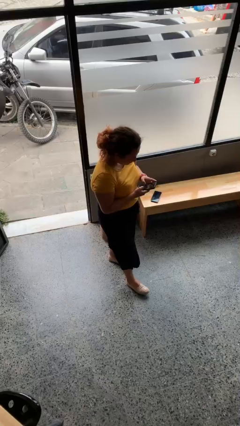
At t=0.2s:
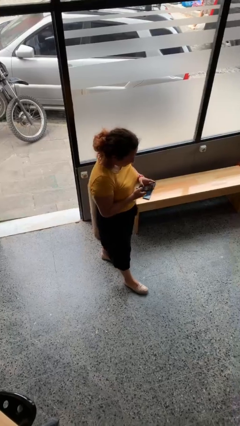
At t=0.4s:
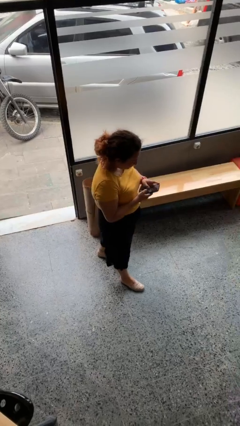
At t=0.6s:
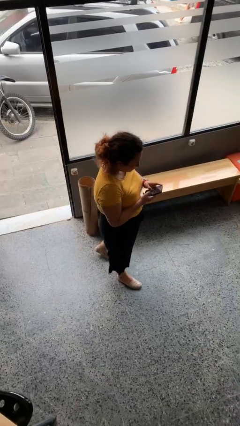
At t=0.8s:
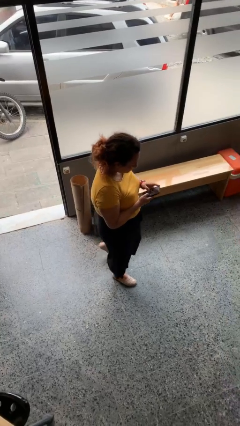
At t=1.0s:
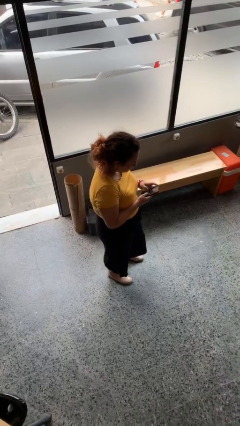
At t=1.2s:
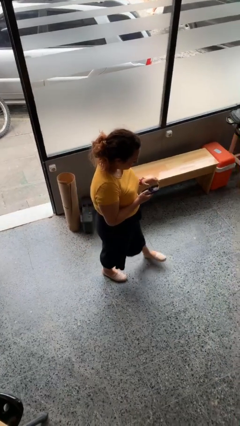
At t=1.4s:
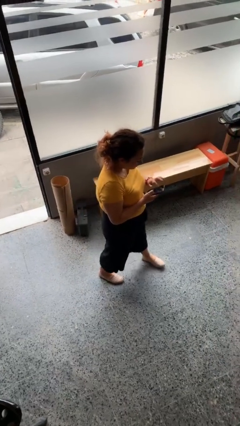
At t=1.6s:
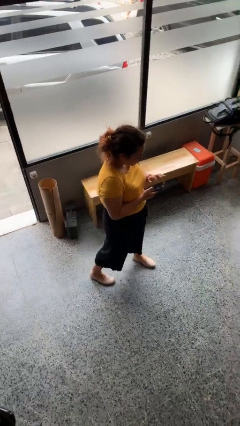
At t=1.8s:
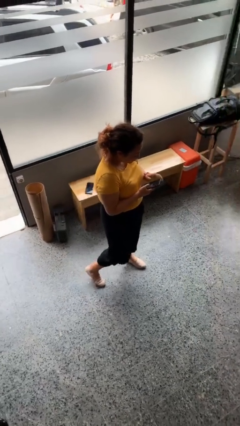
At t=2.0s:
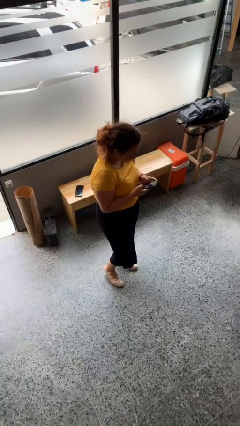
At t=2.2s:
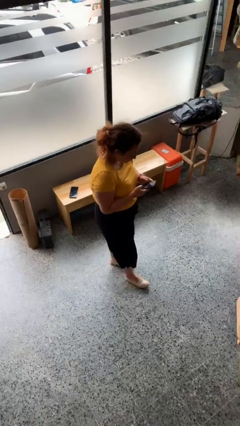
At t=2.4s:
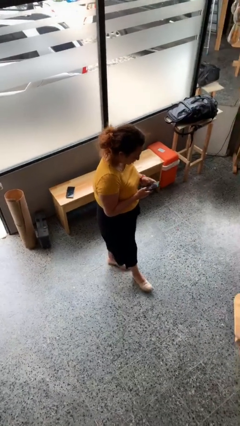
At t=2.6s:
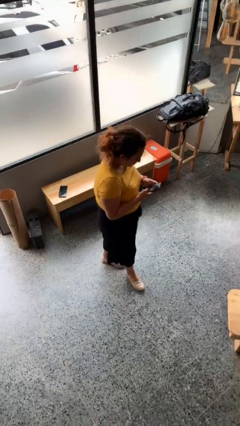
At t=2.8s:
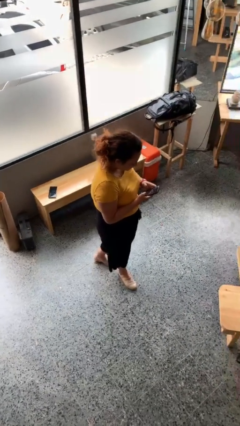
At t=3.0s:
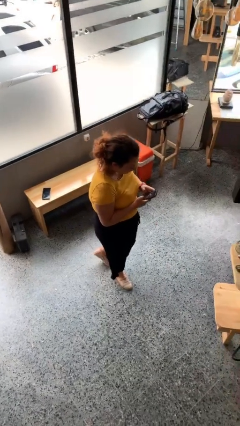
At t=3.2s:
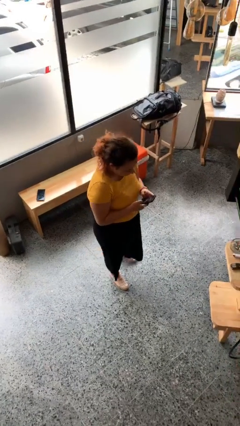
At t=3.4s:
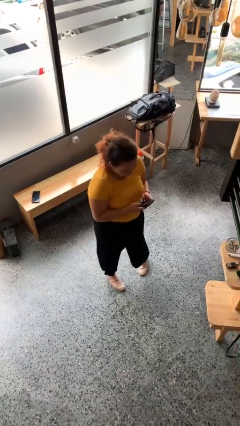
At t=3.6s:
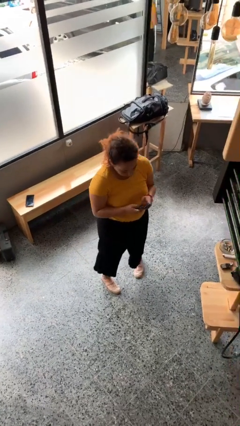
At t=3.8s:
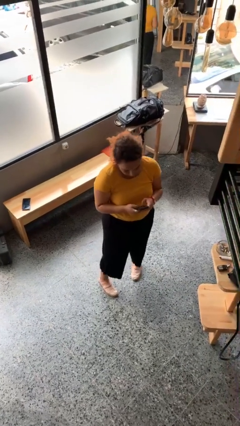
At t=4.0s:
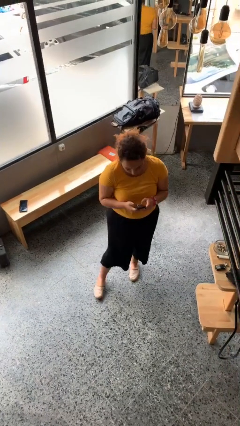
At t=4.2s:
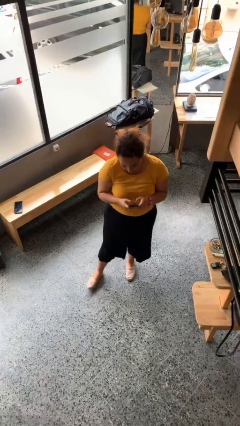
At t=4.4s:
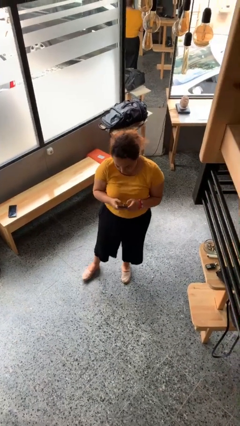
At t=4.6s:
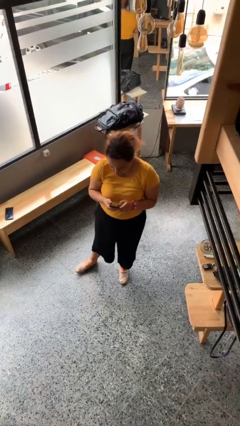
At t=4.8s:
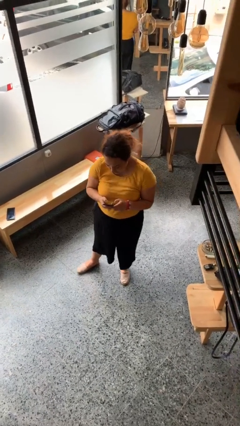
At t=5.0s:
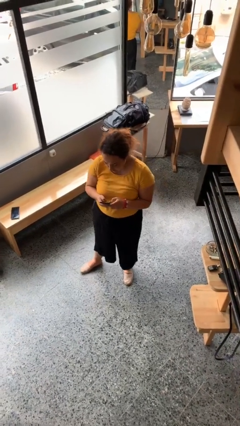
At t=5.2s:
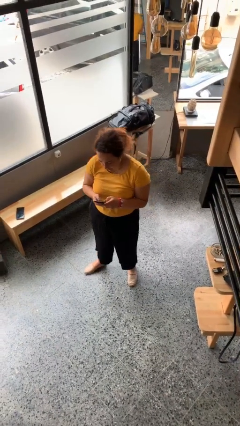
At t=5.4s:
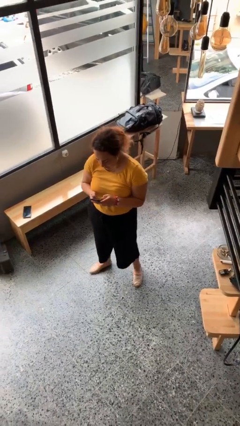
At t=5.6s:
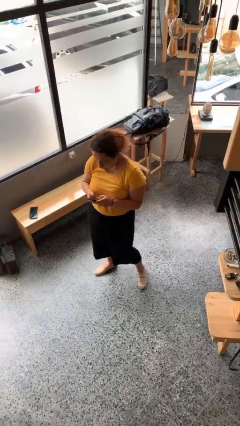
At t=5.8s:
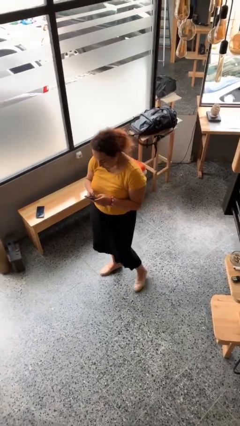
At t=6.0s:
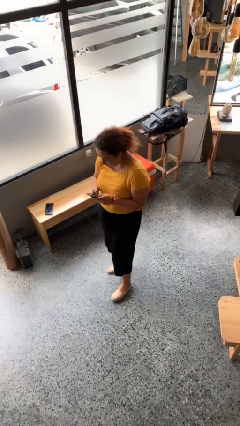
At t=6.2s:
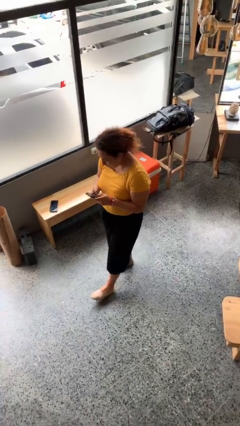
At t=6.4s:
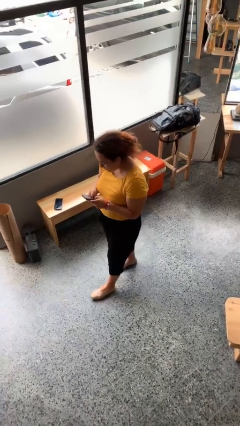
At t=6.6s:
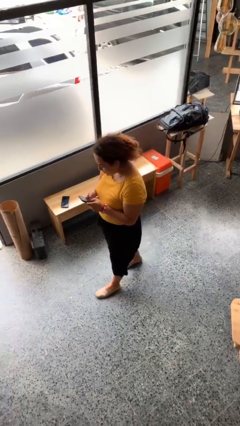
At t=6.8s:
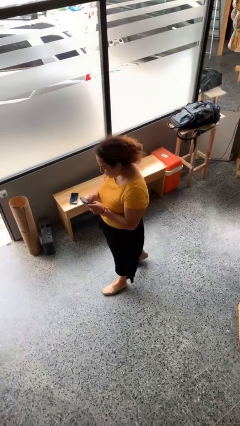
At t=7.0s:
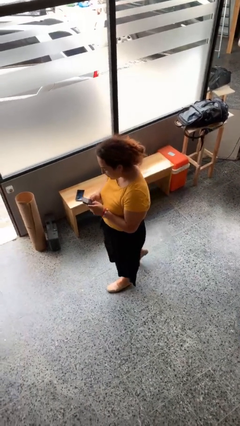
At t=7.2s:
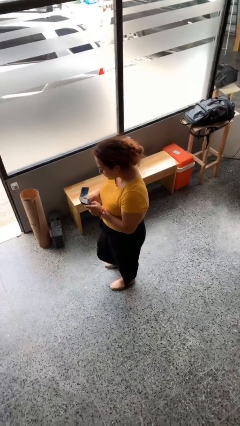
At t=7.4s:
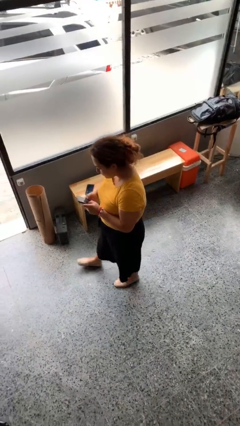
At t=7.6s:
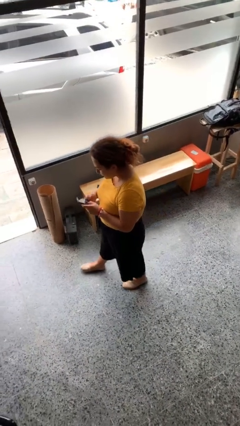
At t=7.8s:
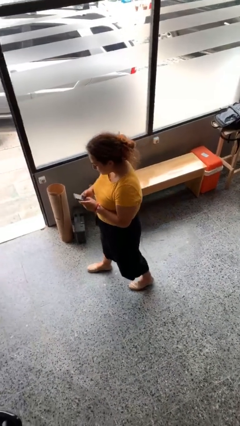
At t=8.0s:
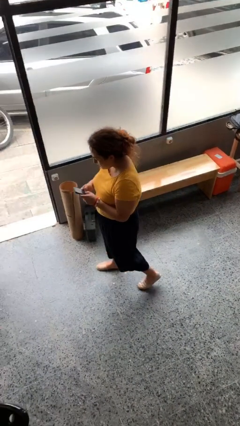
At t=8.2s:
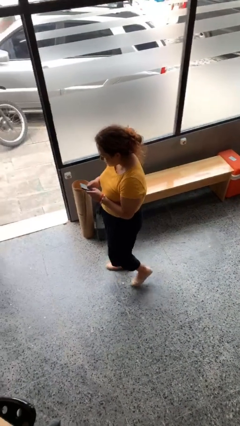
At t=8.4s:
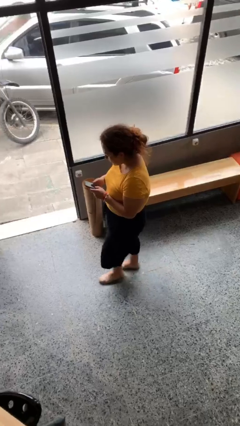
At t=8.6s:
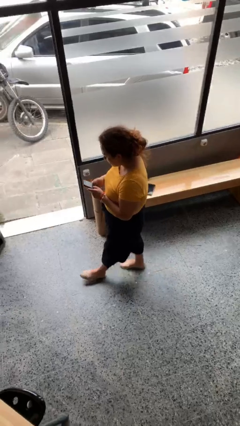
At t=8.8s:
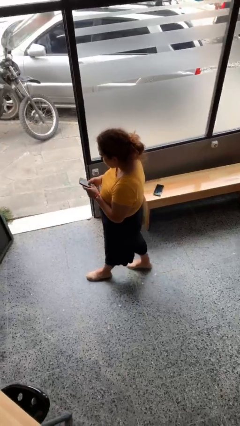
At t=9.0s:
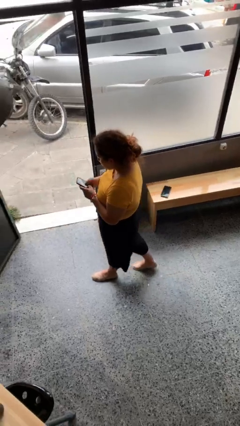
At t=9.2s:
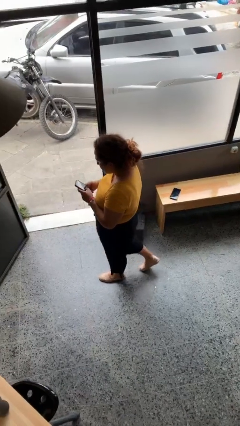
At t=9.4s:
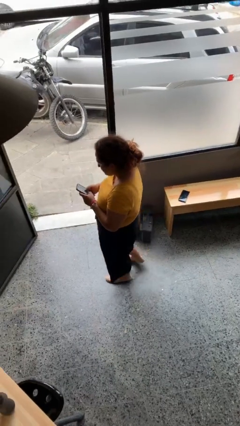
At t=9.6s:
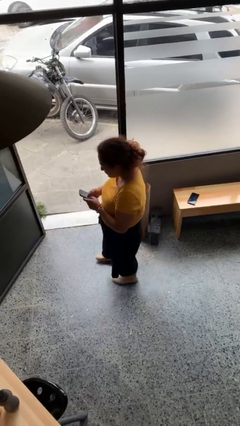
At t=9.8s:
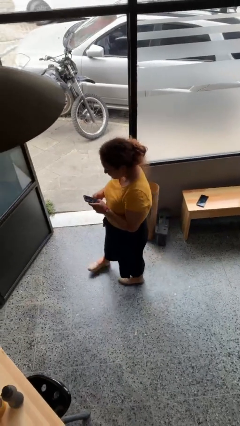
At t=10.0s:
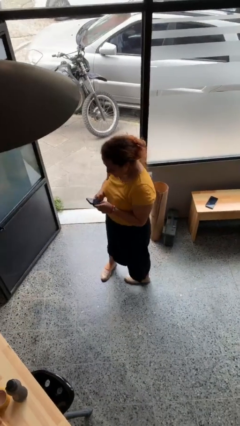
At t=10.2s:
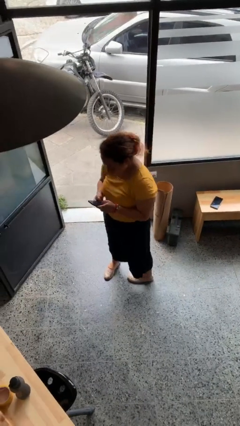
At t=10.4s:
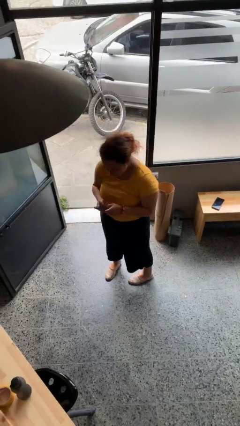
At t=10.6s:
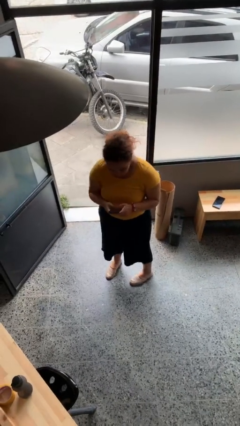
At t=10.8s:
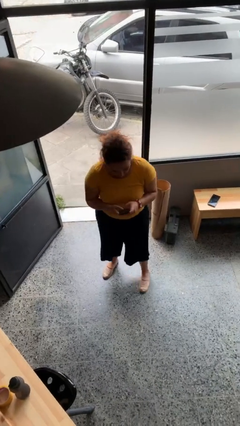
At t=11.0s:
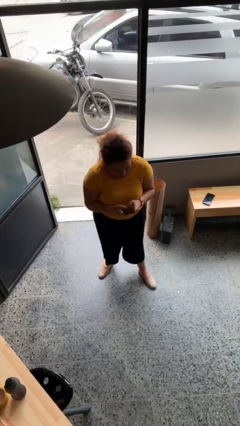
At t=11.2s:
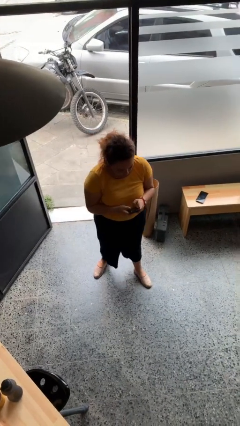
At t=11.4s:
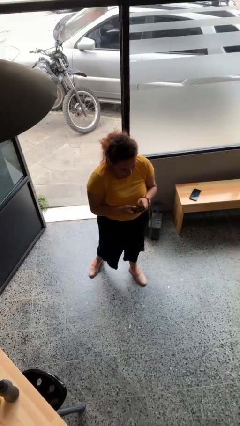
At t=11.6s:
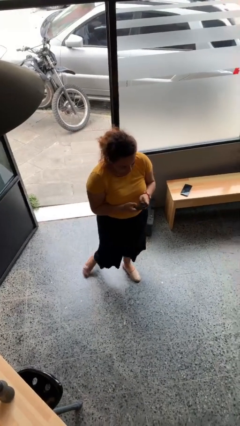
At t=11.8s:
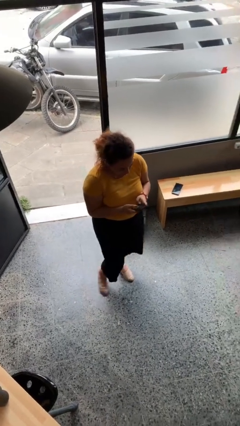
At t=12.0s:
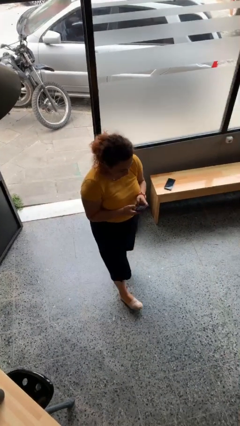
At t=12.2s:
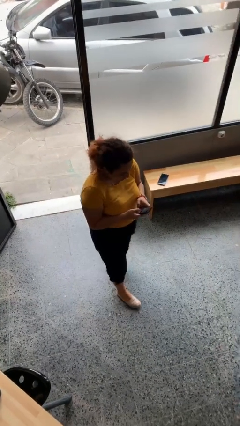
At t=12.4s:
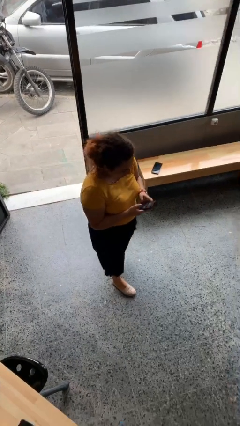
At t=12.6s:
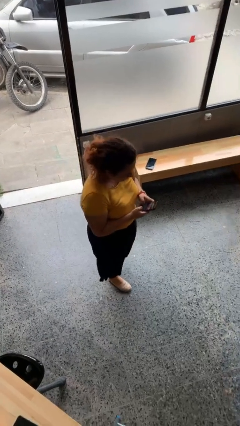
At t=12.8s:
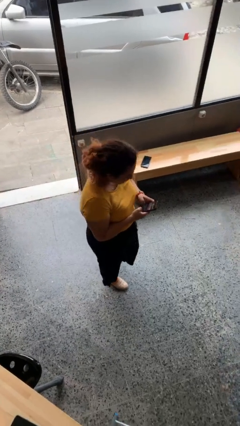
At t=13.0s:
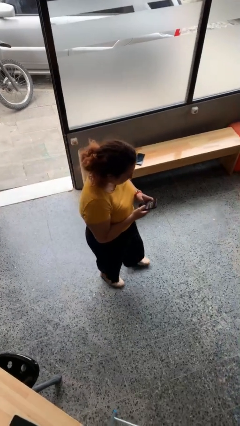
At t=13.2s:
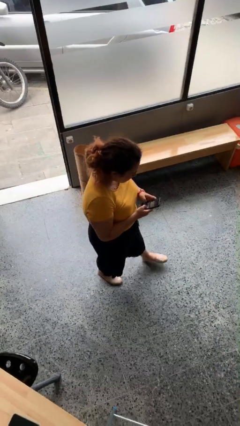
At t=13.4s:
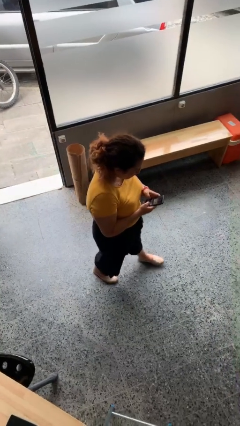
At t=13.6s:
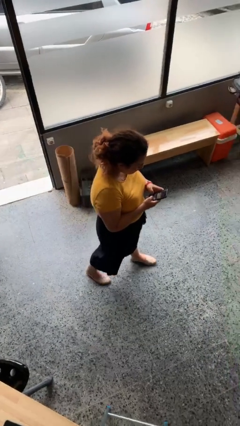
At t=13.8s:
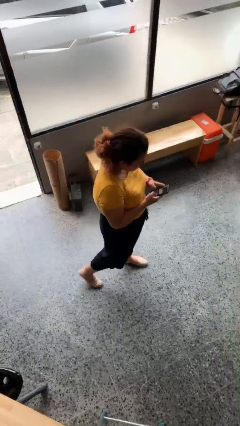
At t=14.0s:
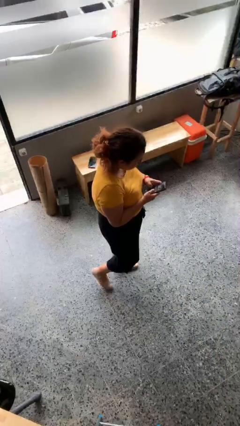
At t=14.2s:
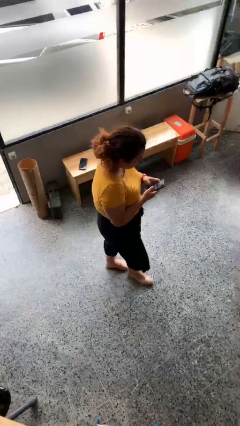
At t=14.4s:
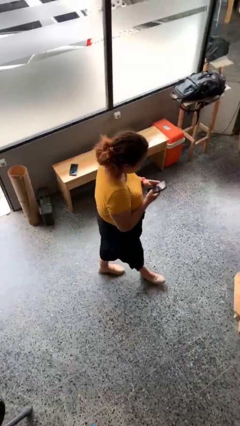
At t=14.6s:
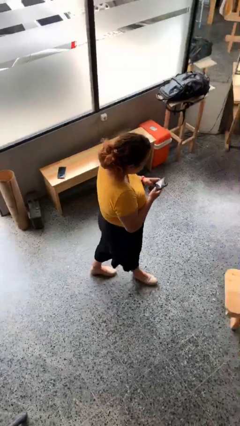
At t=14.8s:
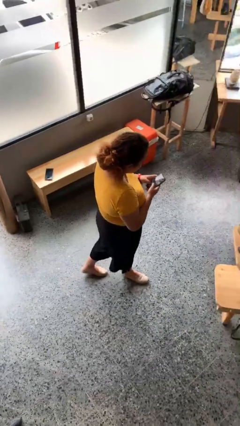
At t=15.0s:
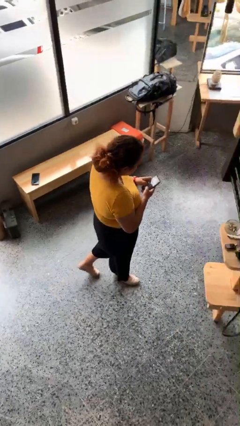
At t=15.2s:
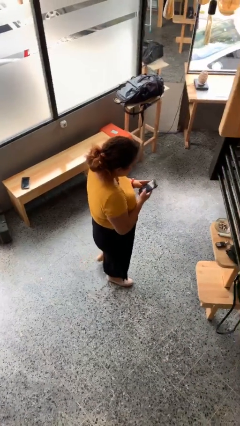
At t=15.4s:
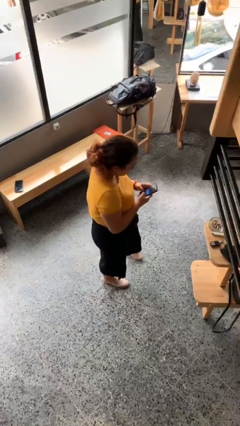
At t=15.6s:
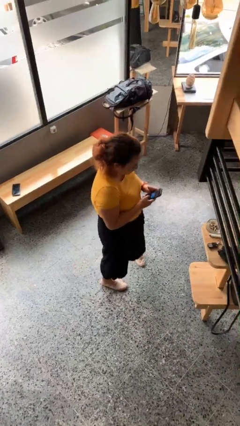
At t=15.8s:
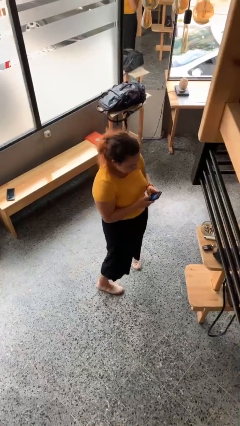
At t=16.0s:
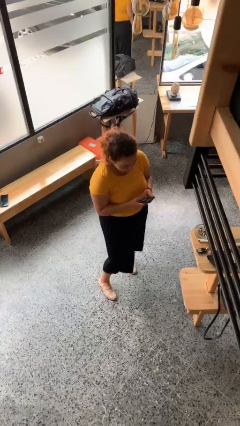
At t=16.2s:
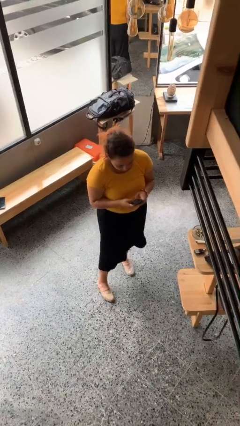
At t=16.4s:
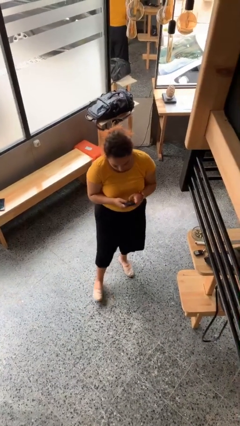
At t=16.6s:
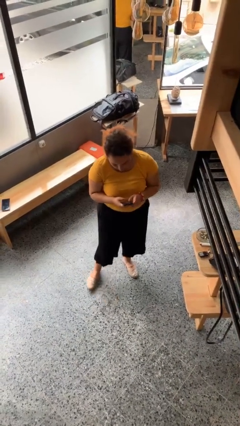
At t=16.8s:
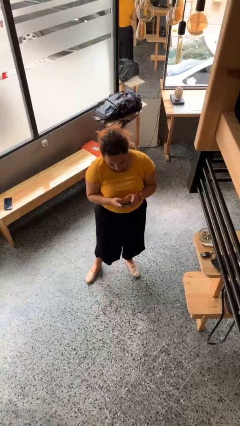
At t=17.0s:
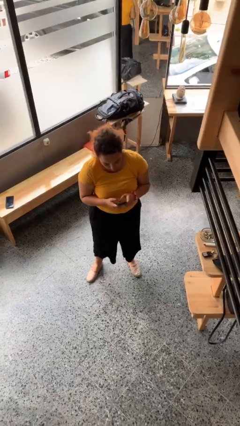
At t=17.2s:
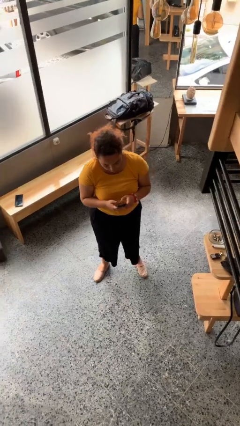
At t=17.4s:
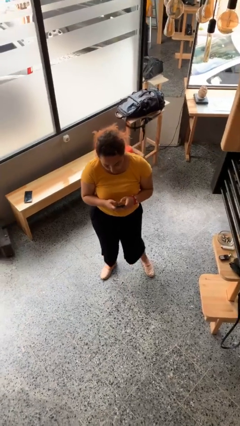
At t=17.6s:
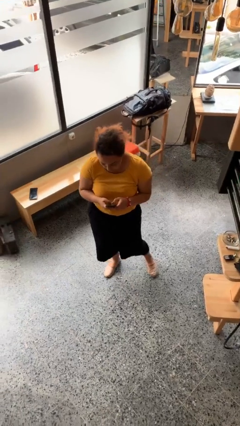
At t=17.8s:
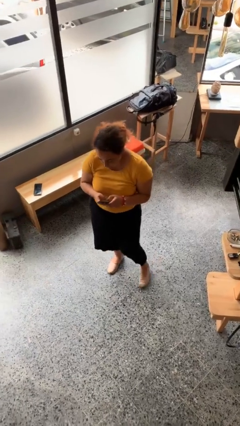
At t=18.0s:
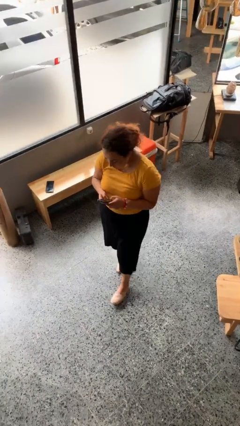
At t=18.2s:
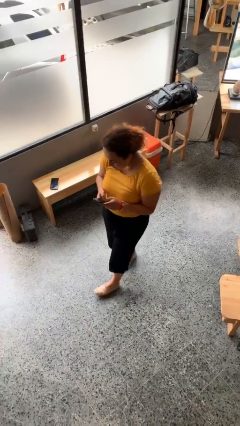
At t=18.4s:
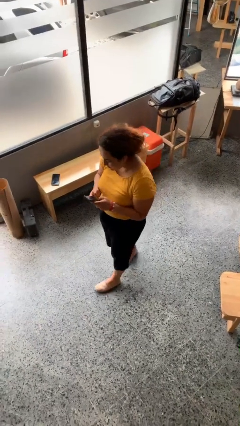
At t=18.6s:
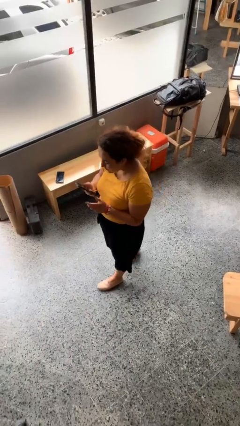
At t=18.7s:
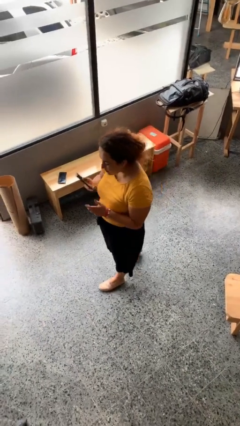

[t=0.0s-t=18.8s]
person texts on phone
